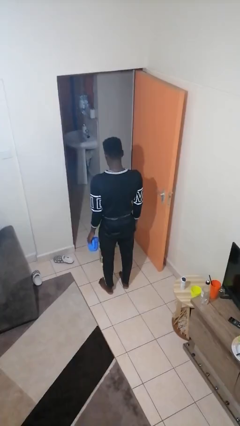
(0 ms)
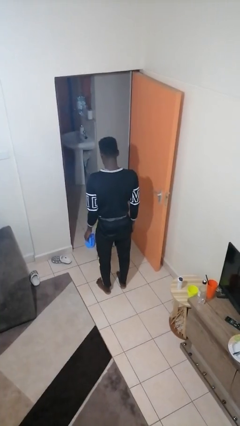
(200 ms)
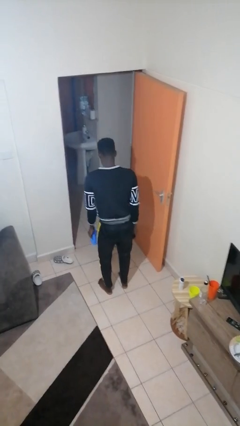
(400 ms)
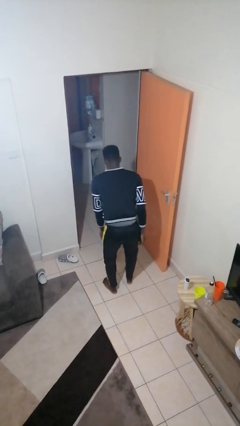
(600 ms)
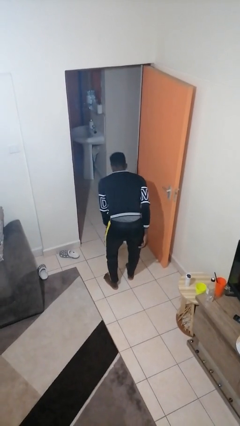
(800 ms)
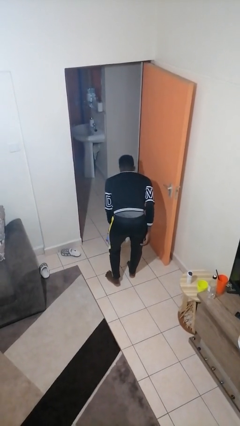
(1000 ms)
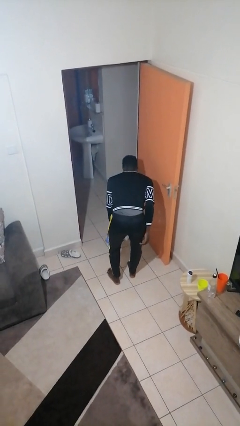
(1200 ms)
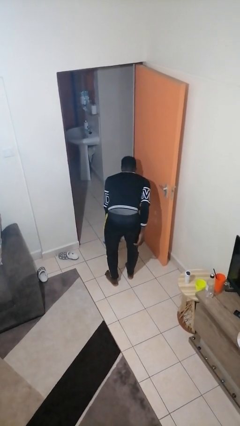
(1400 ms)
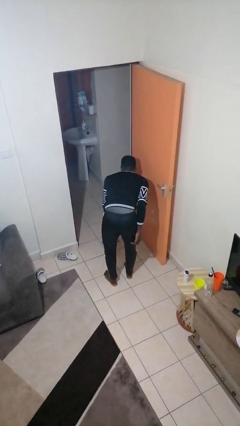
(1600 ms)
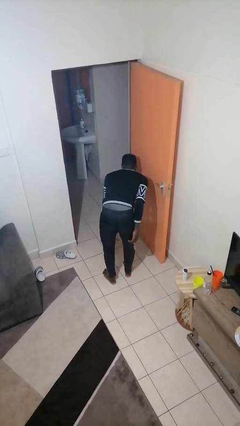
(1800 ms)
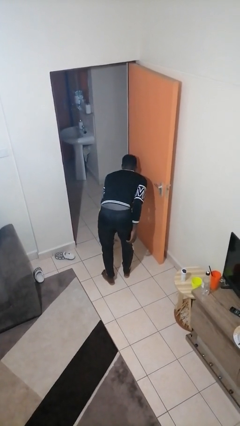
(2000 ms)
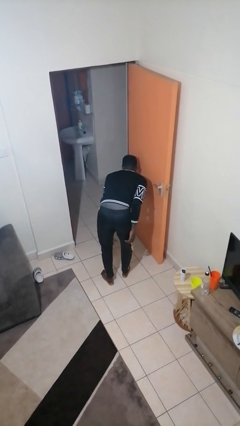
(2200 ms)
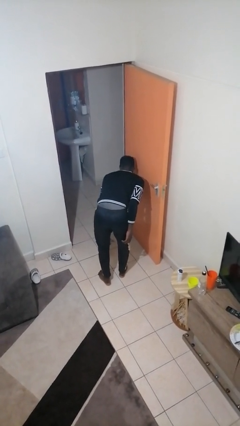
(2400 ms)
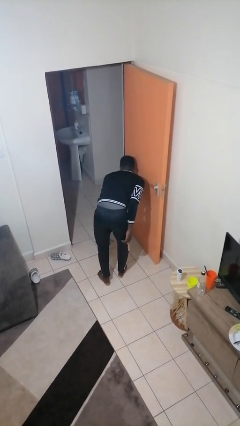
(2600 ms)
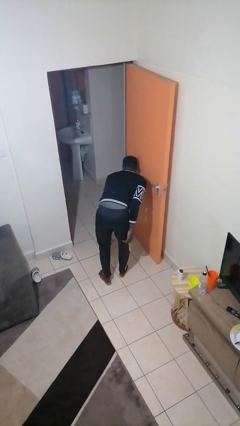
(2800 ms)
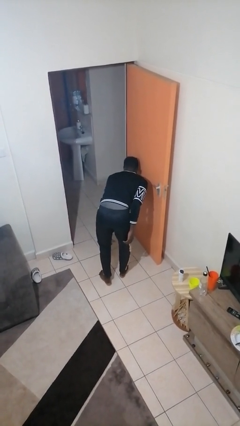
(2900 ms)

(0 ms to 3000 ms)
person waters houseplant

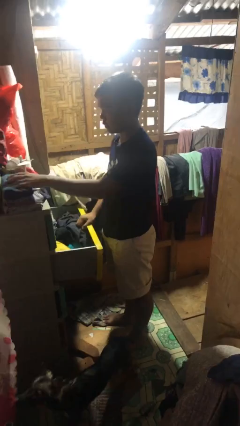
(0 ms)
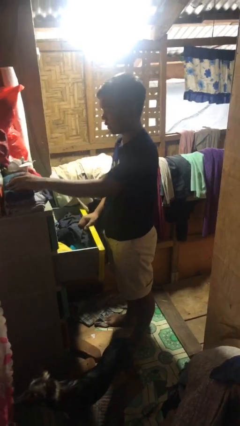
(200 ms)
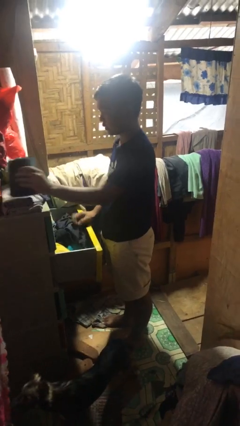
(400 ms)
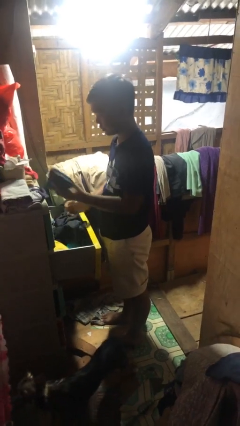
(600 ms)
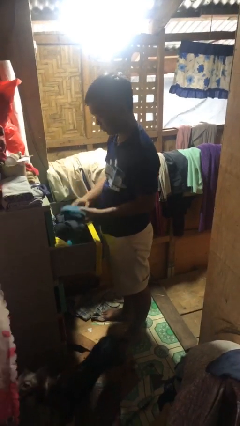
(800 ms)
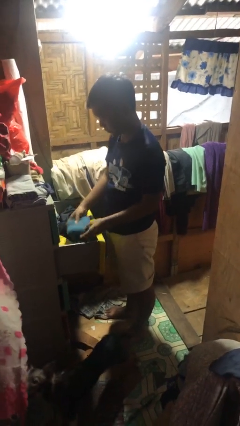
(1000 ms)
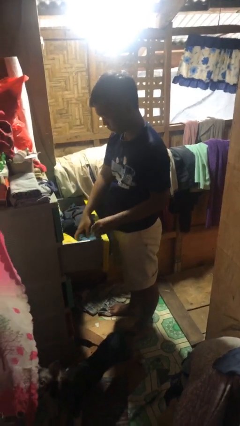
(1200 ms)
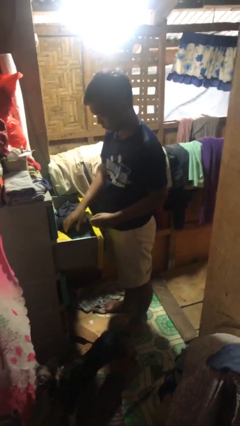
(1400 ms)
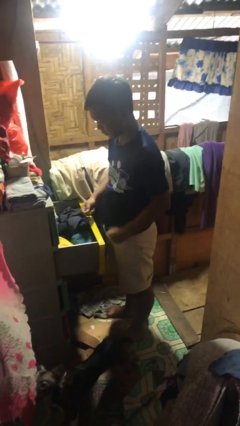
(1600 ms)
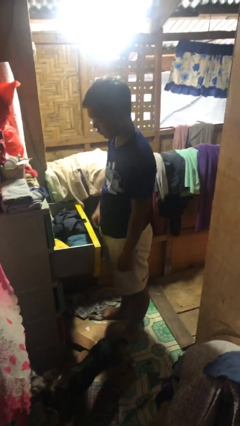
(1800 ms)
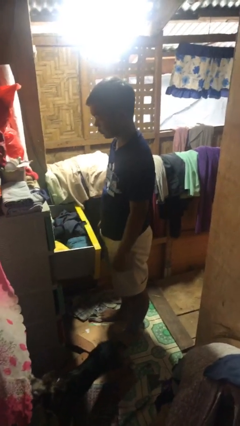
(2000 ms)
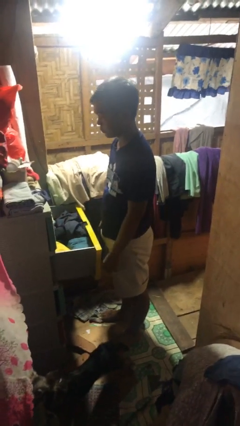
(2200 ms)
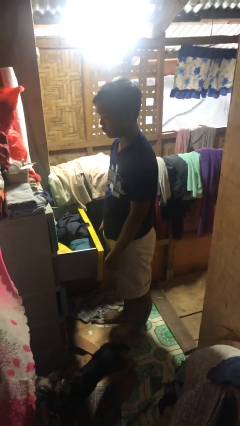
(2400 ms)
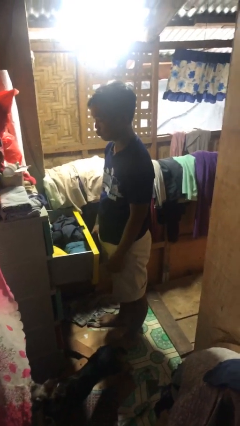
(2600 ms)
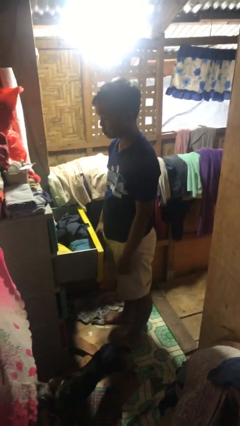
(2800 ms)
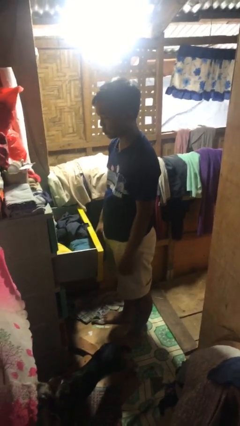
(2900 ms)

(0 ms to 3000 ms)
person puts clothes into dresser

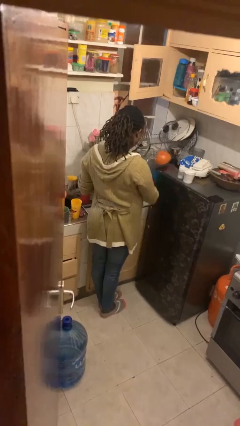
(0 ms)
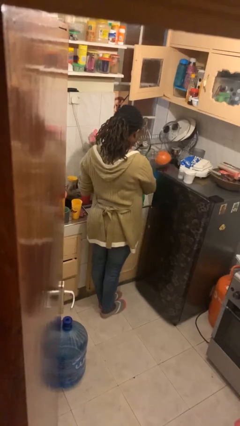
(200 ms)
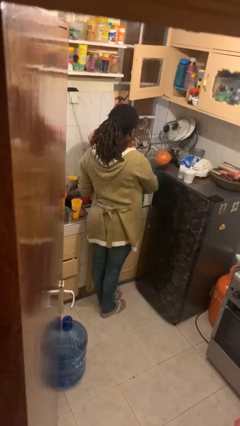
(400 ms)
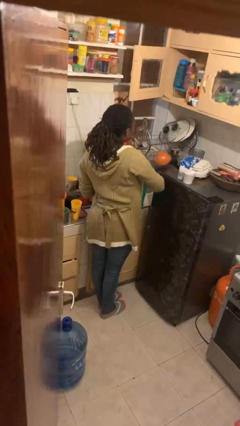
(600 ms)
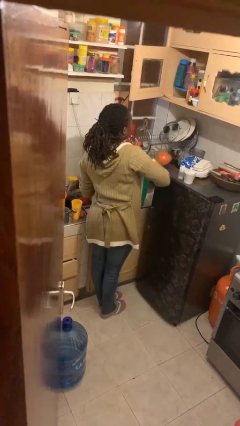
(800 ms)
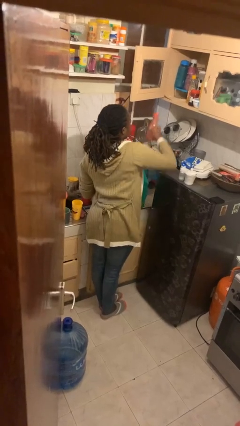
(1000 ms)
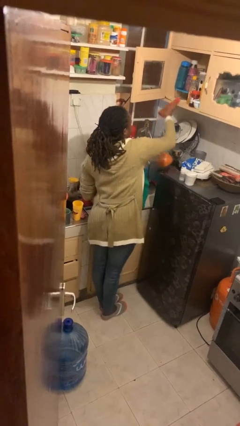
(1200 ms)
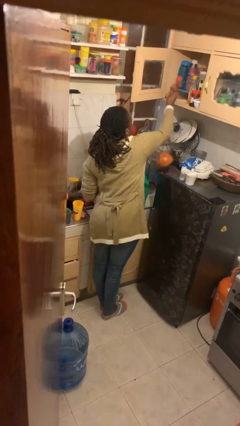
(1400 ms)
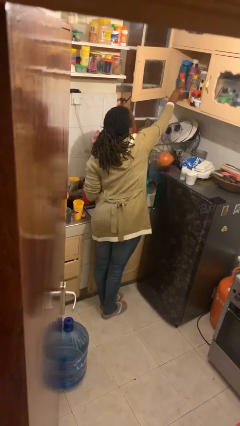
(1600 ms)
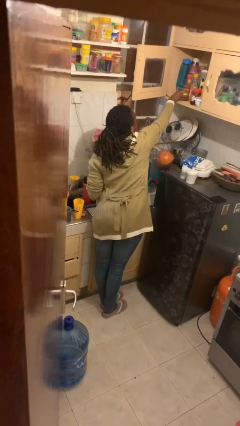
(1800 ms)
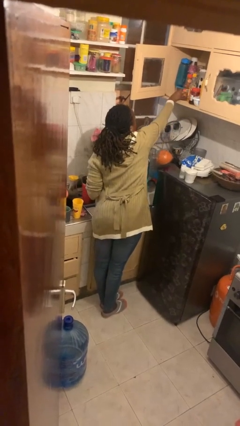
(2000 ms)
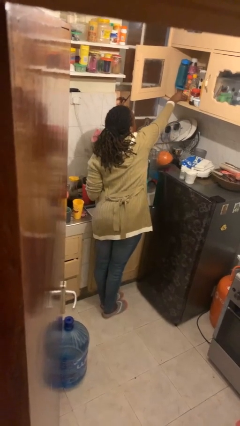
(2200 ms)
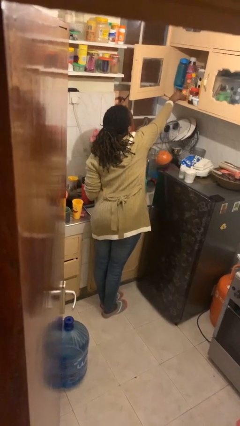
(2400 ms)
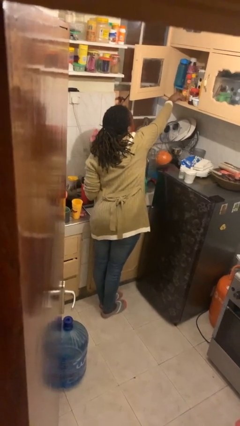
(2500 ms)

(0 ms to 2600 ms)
person loads groceries into cabinet

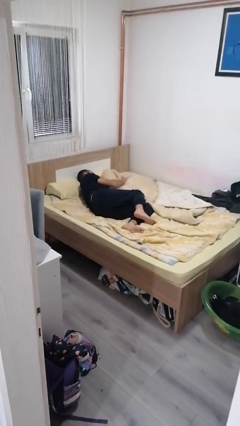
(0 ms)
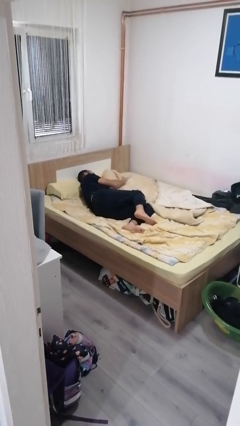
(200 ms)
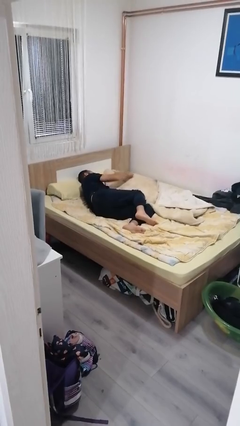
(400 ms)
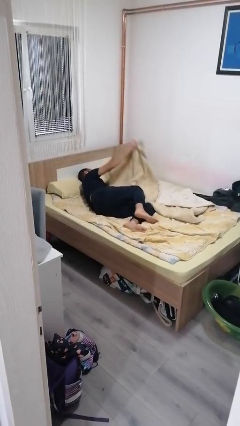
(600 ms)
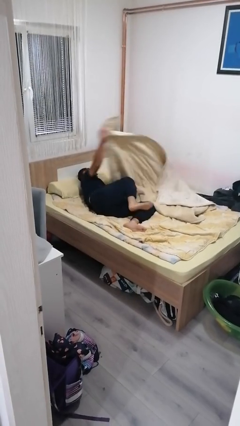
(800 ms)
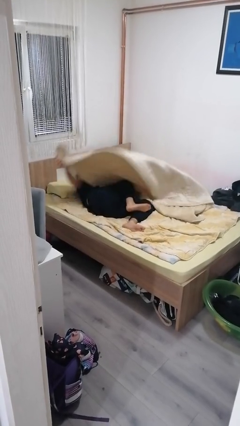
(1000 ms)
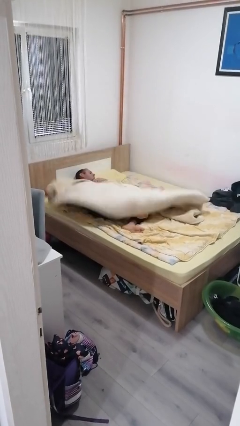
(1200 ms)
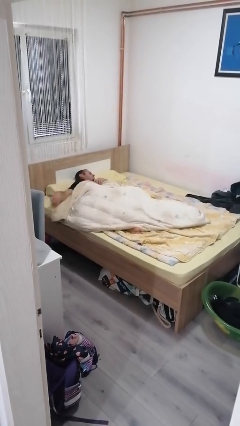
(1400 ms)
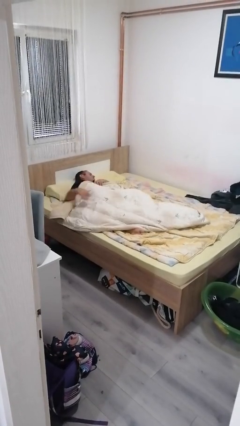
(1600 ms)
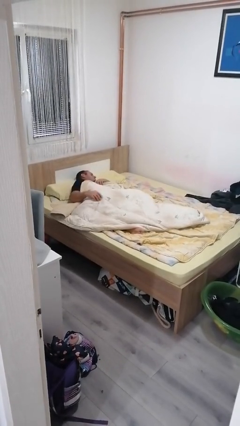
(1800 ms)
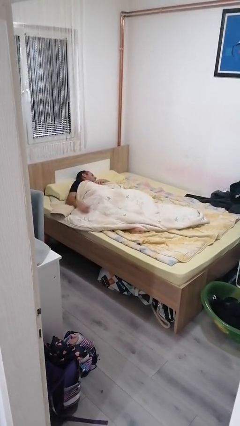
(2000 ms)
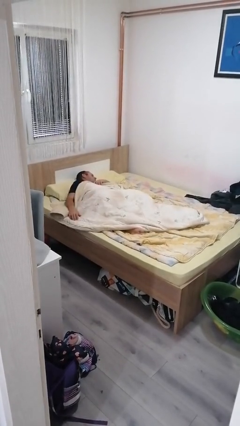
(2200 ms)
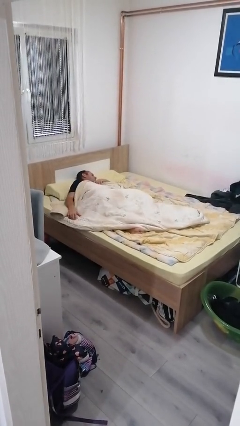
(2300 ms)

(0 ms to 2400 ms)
person covers with bedsheets

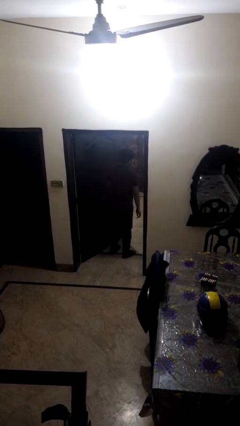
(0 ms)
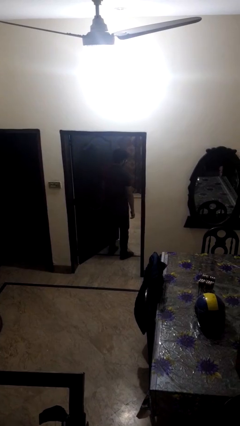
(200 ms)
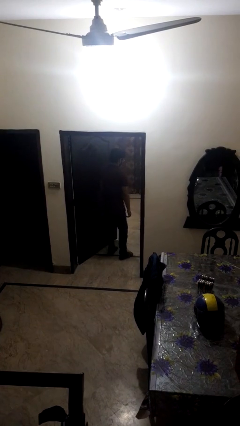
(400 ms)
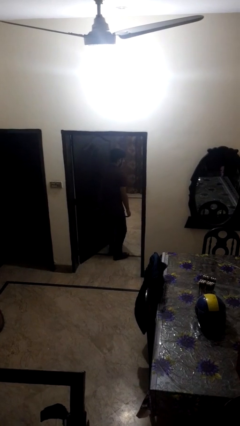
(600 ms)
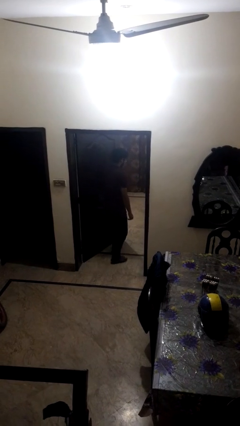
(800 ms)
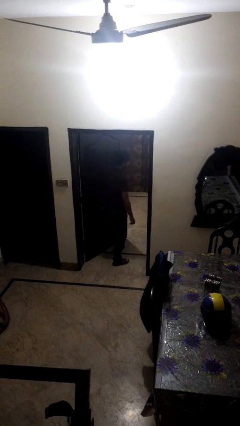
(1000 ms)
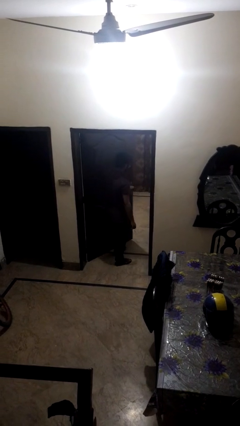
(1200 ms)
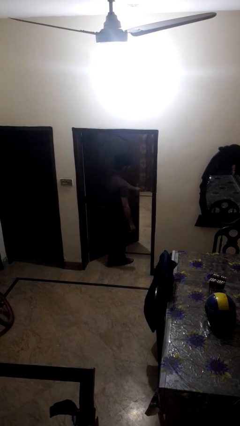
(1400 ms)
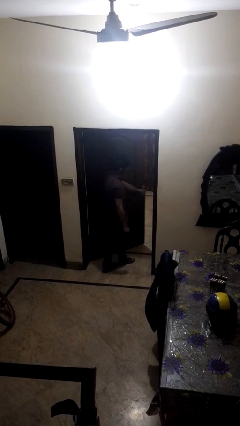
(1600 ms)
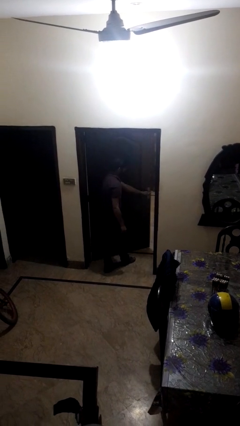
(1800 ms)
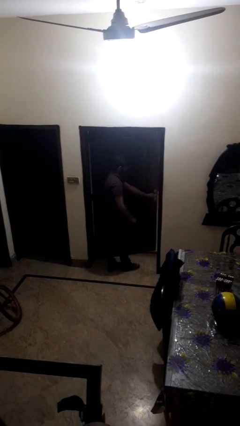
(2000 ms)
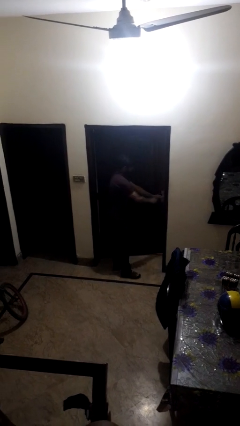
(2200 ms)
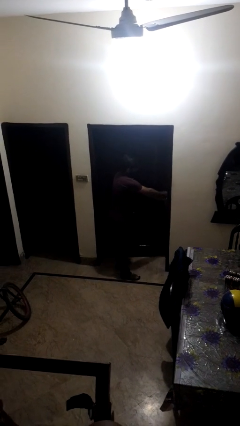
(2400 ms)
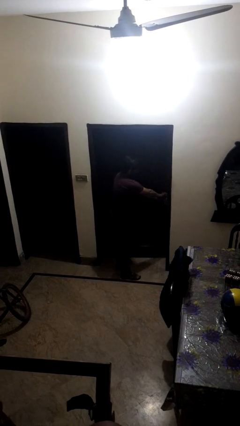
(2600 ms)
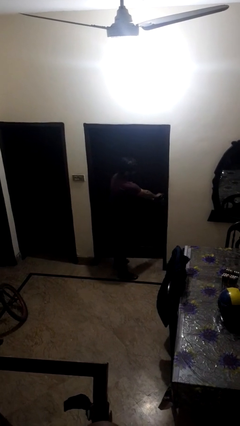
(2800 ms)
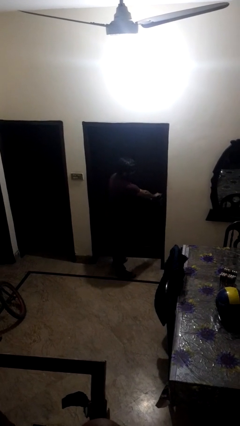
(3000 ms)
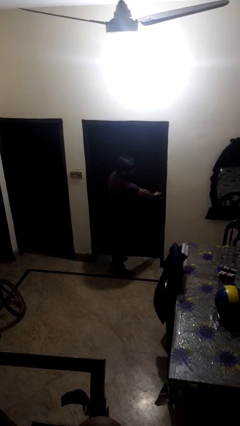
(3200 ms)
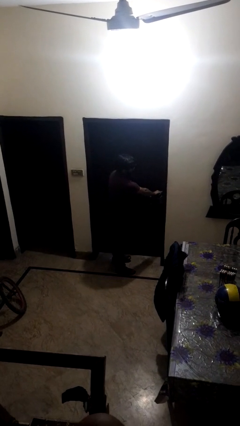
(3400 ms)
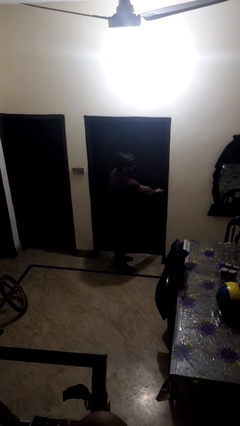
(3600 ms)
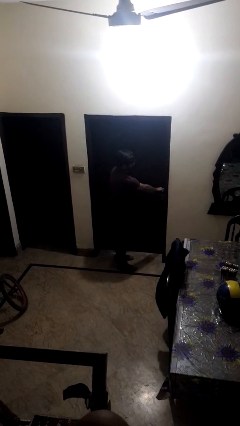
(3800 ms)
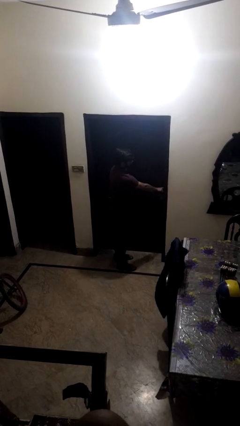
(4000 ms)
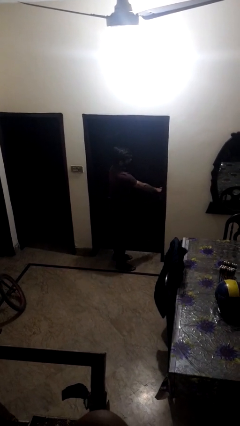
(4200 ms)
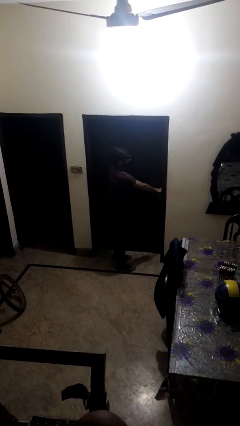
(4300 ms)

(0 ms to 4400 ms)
person closes facility door

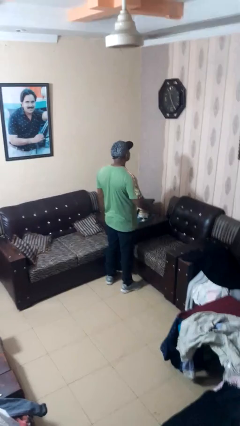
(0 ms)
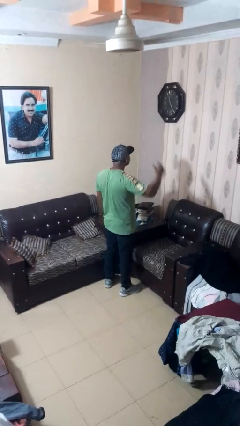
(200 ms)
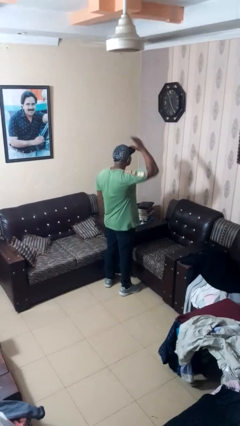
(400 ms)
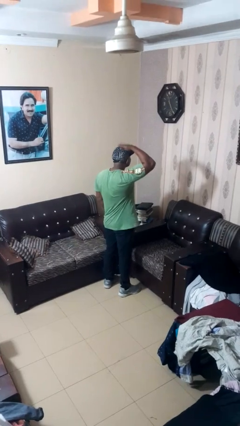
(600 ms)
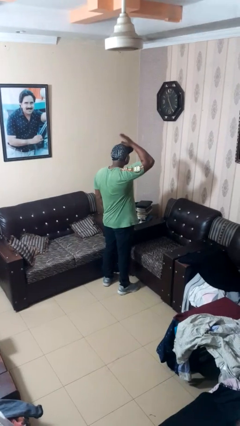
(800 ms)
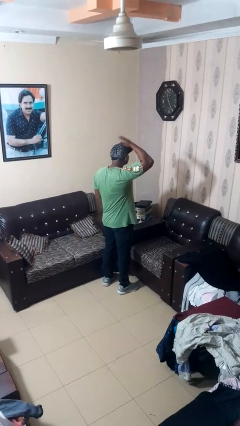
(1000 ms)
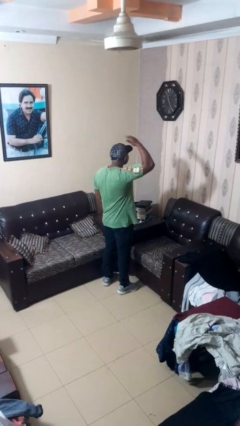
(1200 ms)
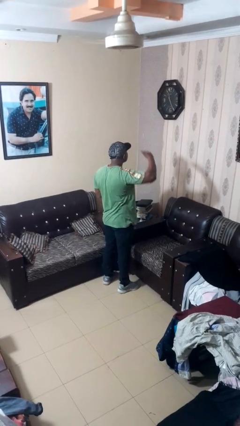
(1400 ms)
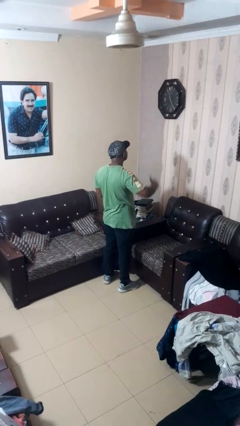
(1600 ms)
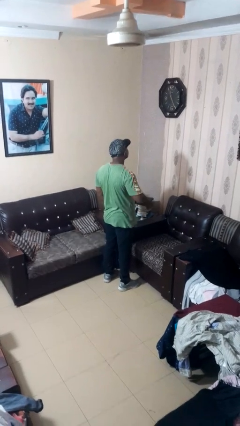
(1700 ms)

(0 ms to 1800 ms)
person pats head

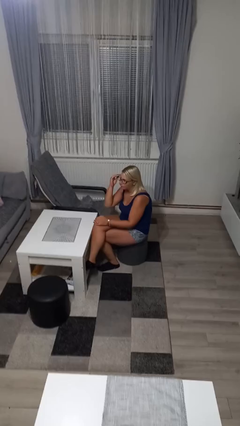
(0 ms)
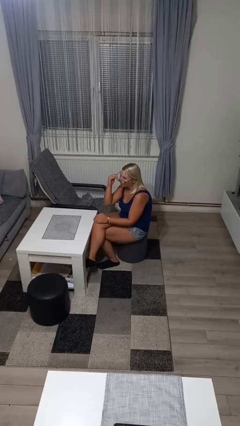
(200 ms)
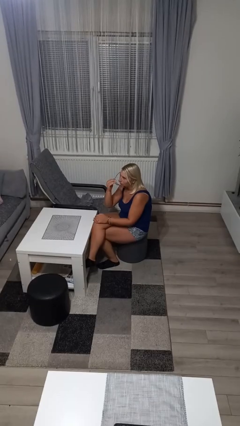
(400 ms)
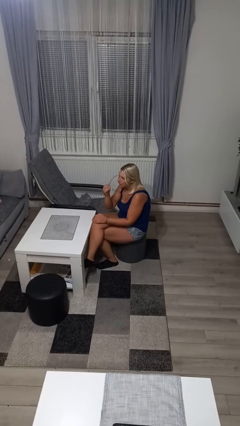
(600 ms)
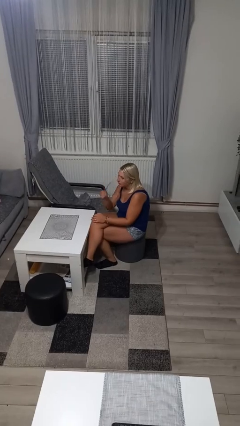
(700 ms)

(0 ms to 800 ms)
person takes off glasses
